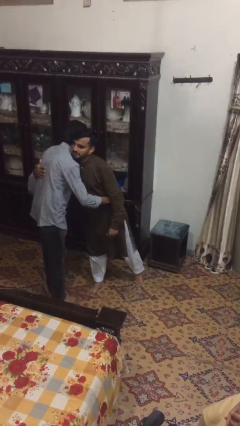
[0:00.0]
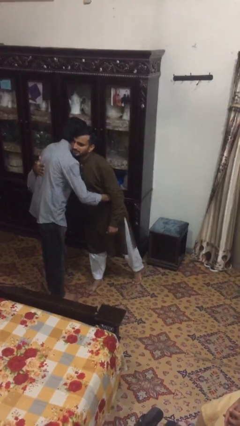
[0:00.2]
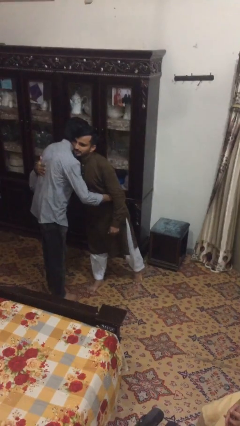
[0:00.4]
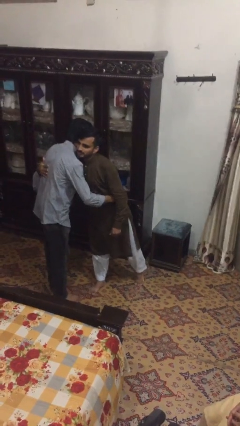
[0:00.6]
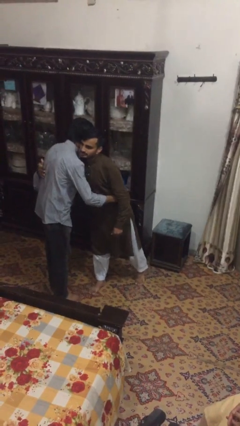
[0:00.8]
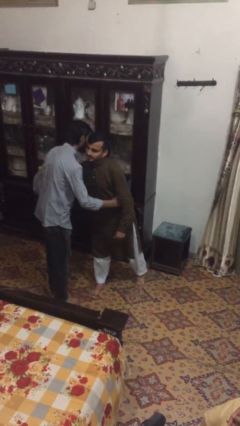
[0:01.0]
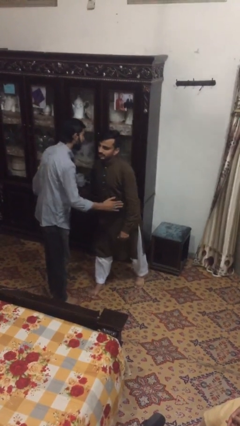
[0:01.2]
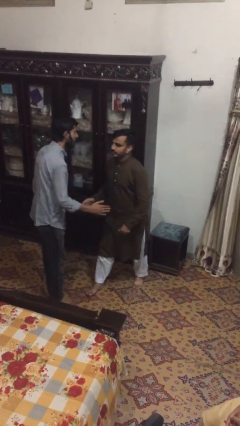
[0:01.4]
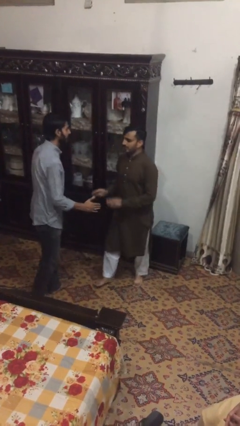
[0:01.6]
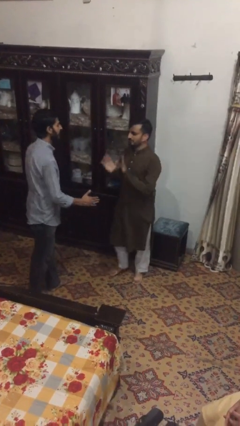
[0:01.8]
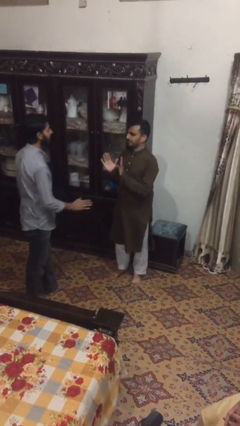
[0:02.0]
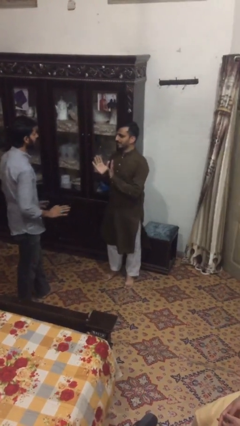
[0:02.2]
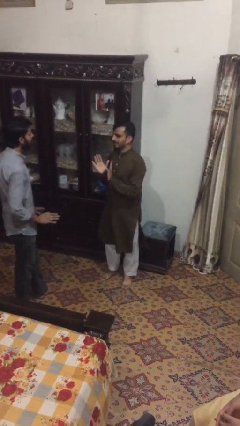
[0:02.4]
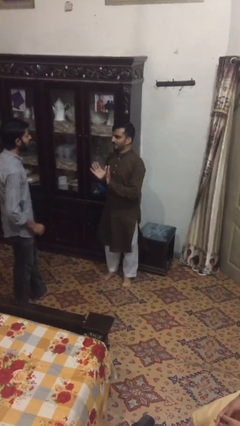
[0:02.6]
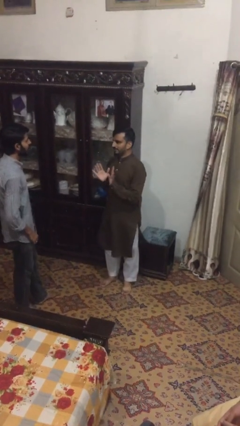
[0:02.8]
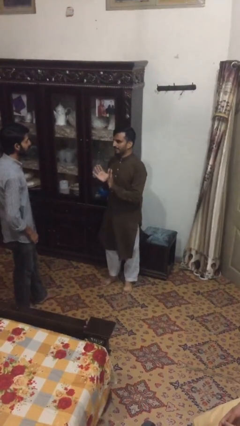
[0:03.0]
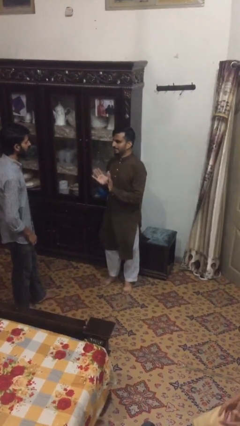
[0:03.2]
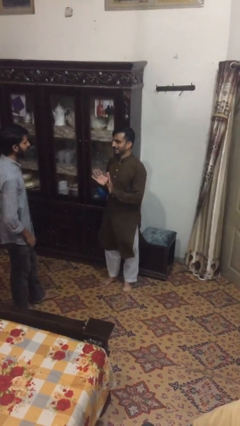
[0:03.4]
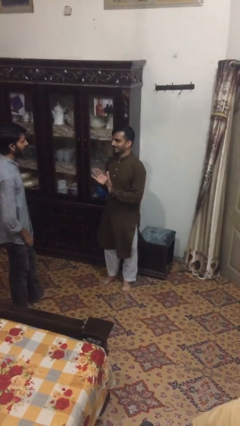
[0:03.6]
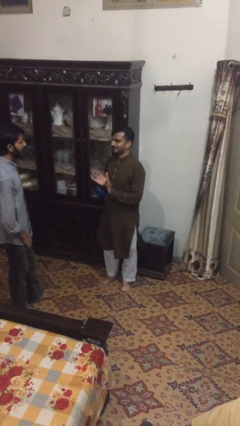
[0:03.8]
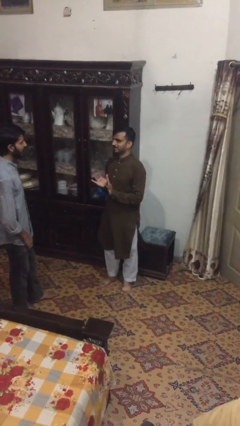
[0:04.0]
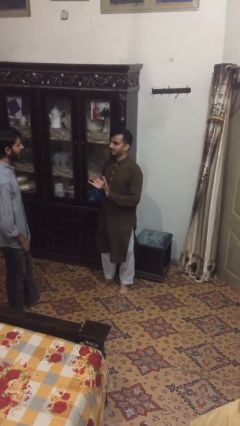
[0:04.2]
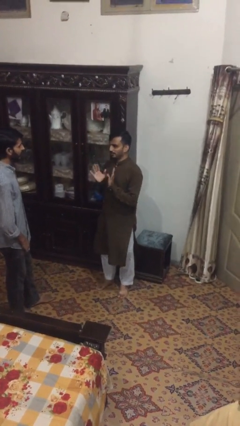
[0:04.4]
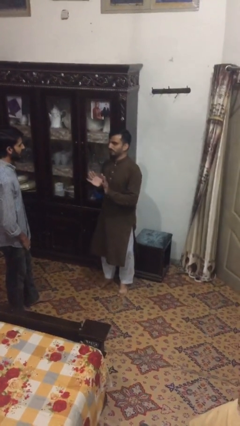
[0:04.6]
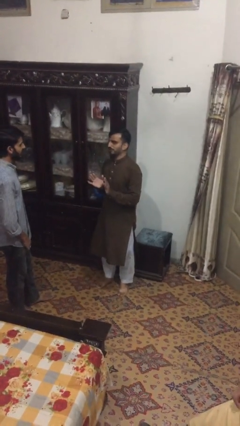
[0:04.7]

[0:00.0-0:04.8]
person talks to person

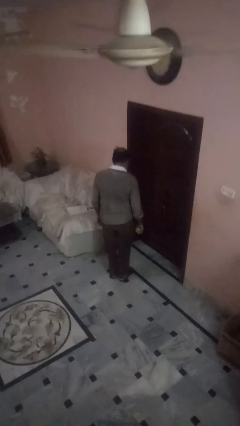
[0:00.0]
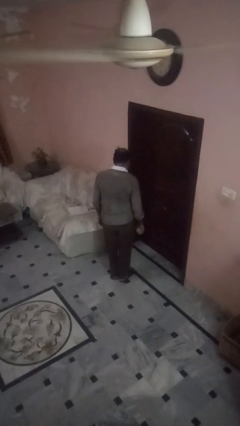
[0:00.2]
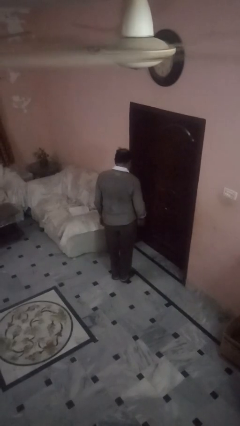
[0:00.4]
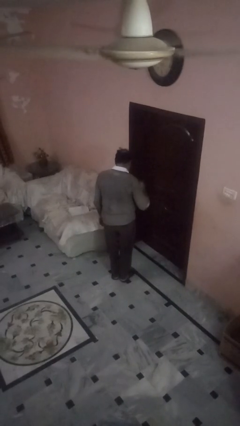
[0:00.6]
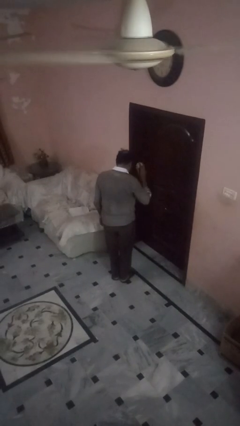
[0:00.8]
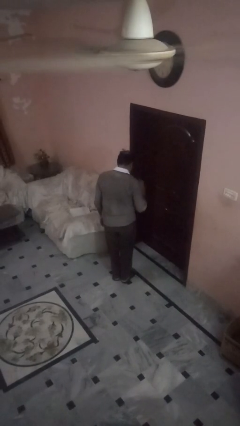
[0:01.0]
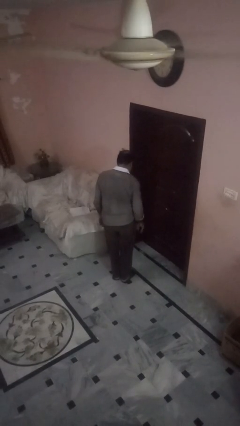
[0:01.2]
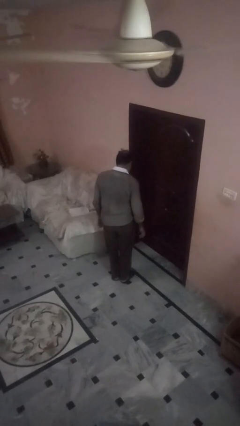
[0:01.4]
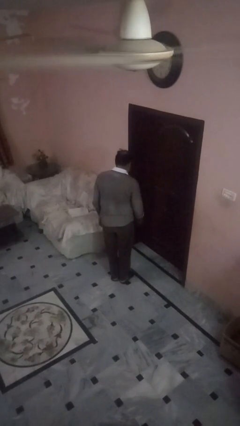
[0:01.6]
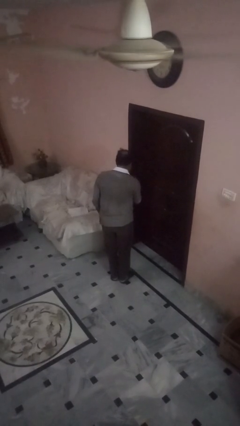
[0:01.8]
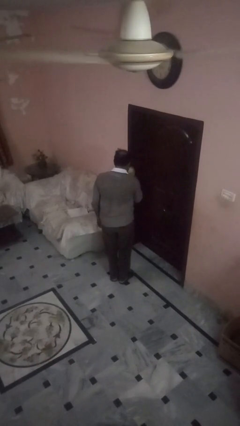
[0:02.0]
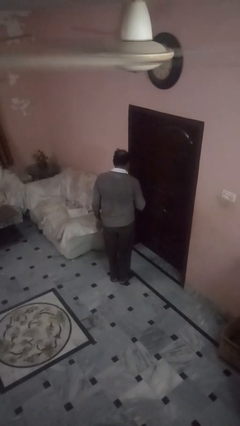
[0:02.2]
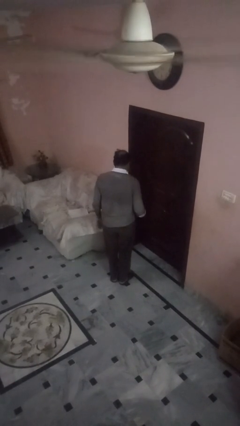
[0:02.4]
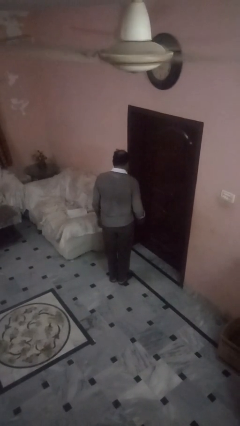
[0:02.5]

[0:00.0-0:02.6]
person bounces ball on floor

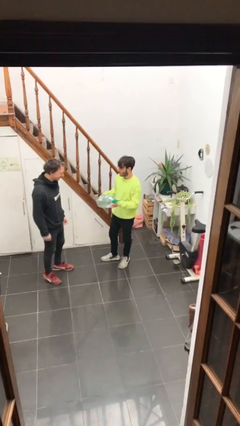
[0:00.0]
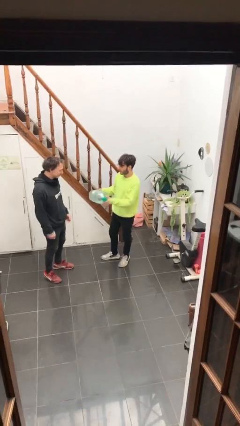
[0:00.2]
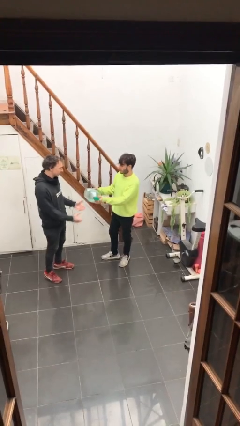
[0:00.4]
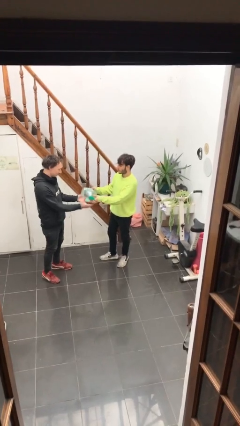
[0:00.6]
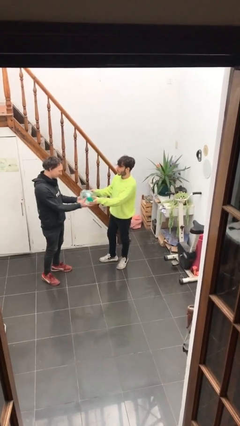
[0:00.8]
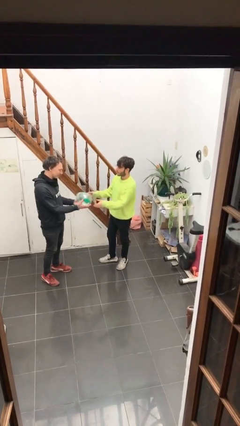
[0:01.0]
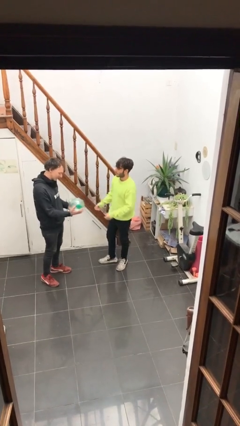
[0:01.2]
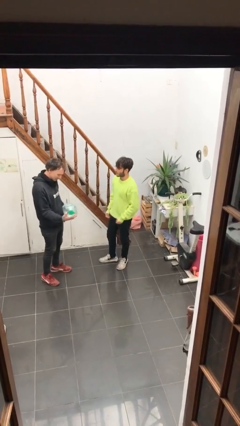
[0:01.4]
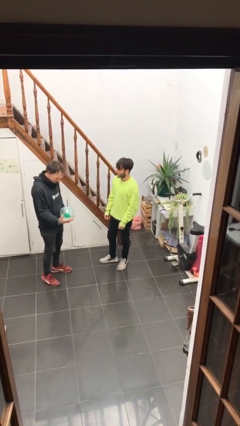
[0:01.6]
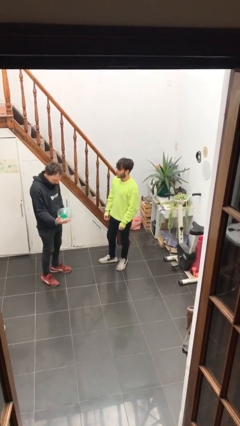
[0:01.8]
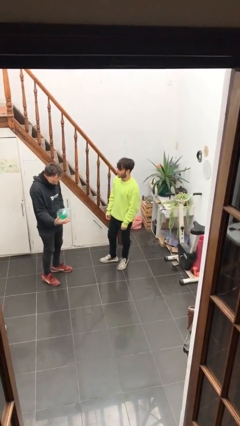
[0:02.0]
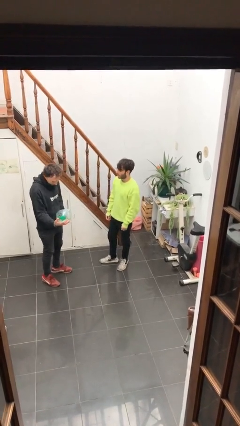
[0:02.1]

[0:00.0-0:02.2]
person transfers object to person

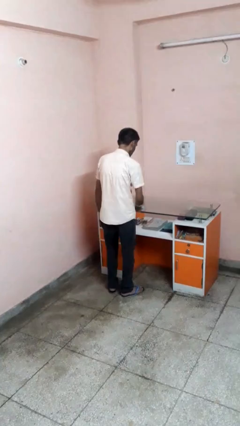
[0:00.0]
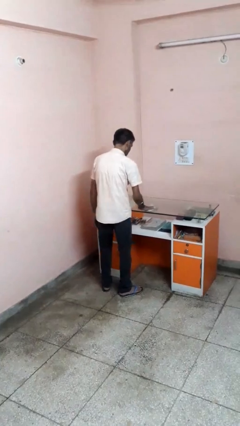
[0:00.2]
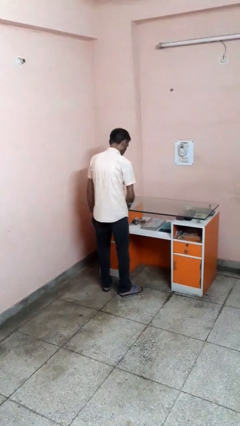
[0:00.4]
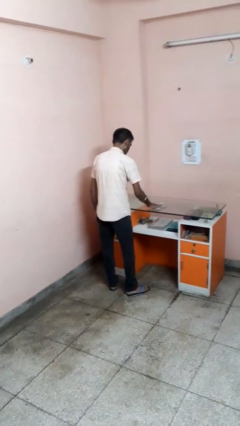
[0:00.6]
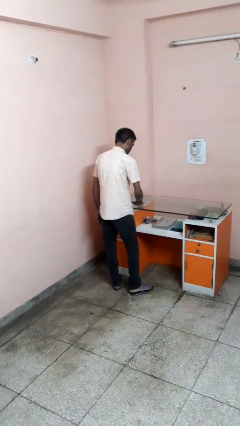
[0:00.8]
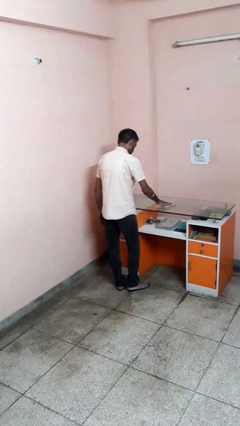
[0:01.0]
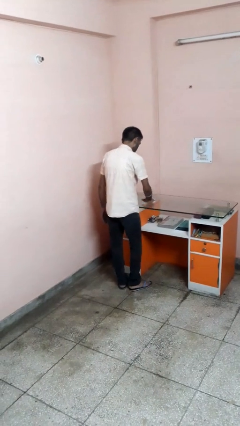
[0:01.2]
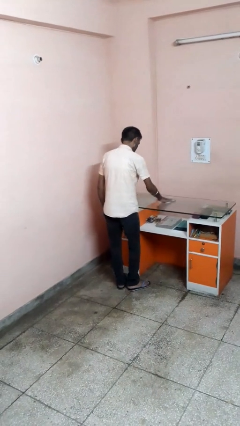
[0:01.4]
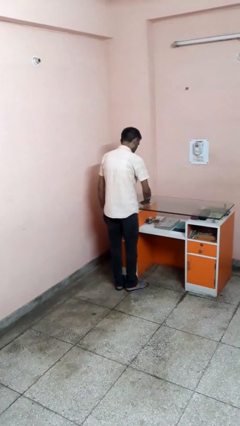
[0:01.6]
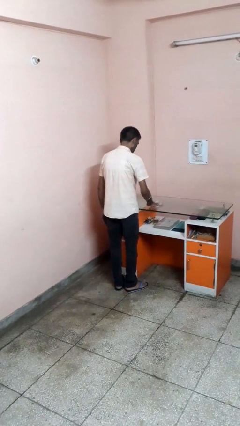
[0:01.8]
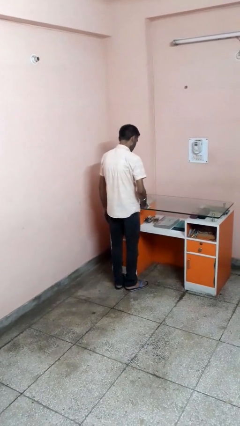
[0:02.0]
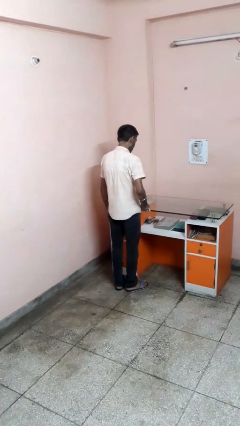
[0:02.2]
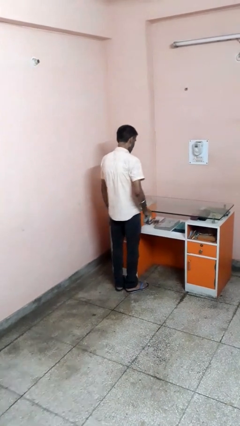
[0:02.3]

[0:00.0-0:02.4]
person cleans table with rag

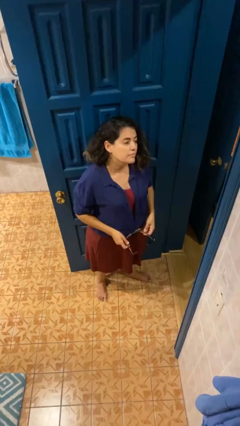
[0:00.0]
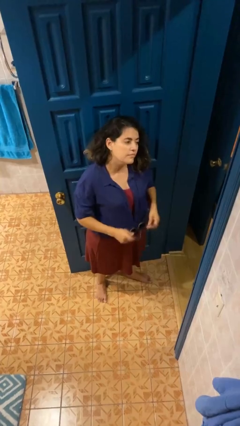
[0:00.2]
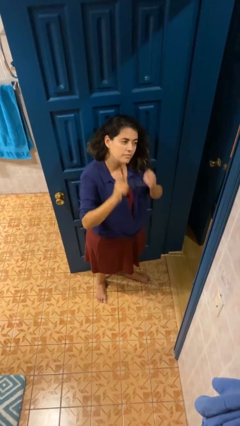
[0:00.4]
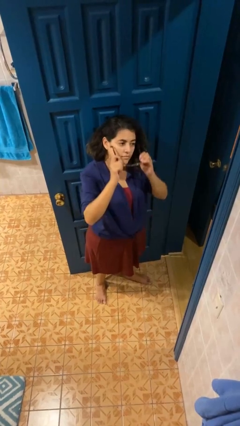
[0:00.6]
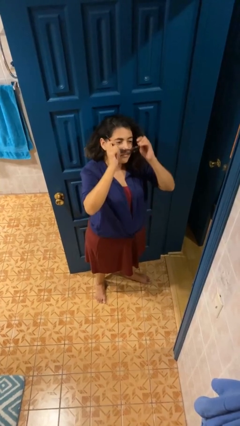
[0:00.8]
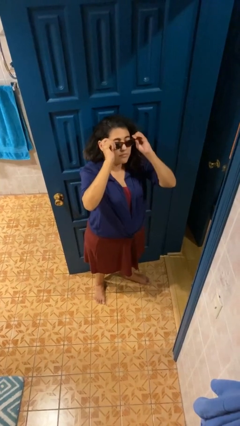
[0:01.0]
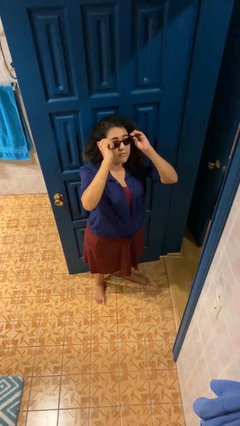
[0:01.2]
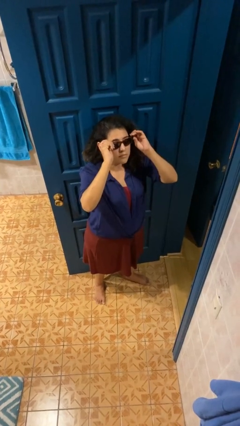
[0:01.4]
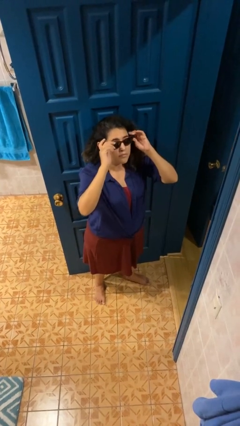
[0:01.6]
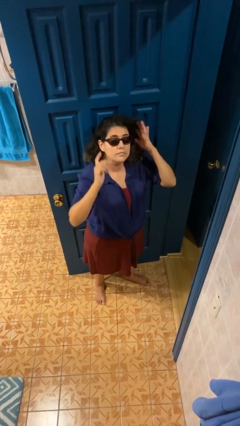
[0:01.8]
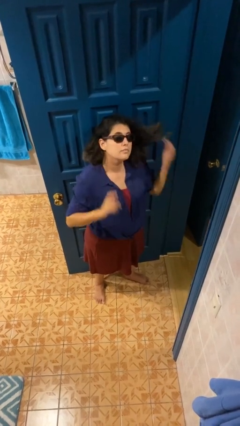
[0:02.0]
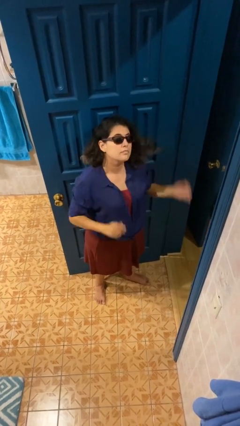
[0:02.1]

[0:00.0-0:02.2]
person puts on sunglasses

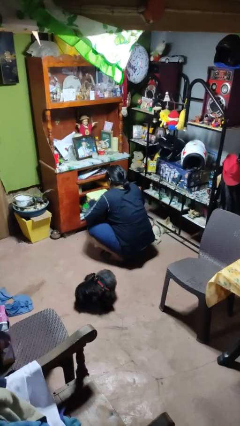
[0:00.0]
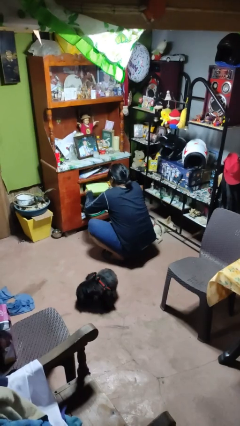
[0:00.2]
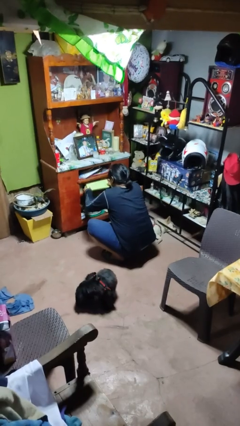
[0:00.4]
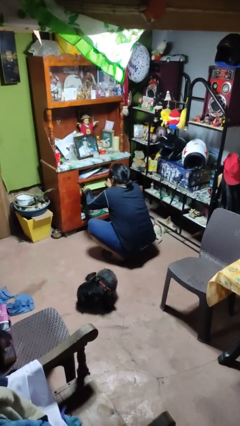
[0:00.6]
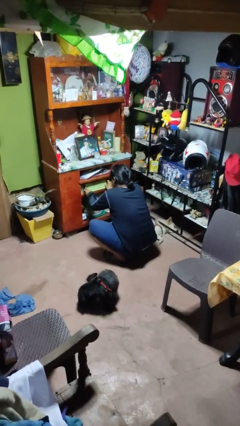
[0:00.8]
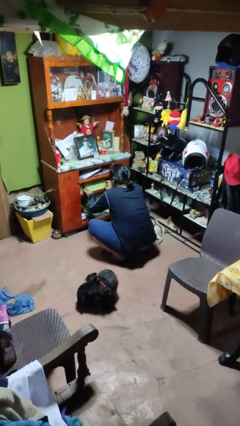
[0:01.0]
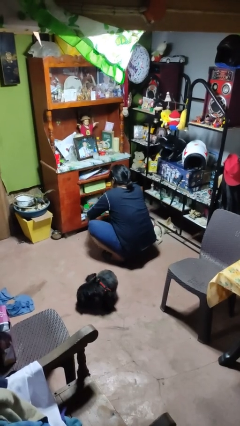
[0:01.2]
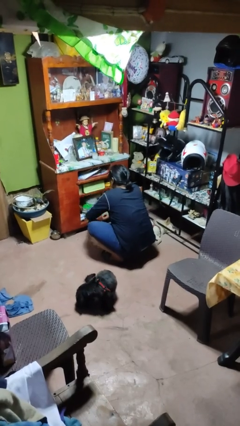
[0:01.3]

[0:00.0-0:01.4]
person puts down object into cabinet

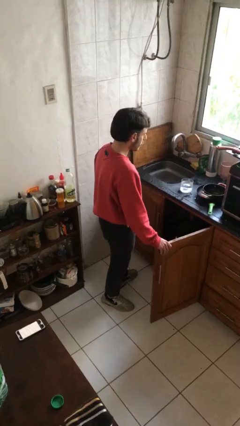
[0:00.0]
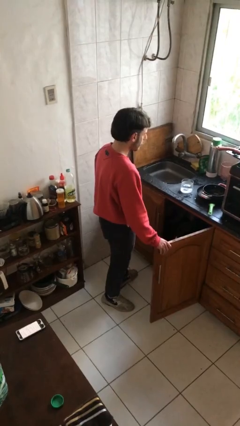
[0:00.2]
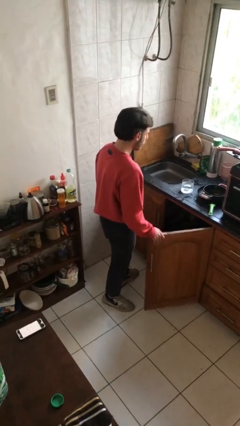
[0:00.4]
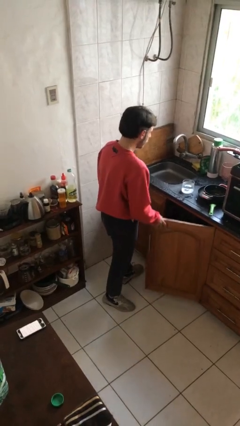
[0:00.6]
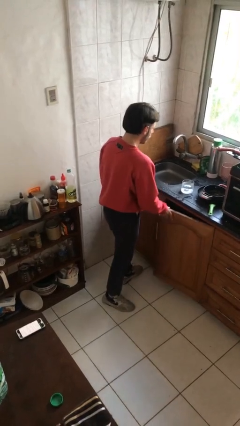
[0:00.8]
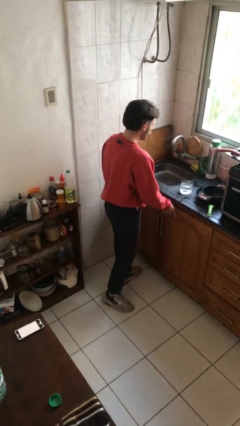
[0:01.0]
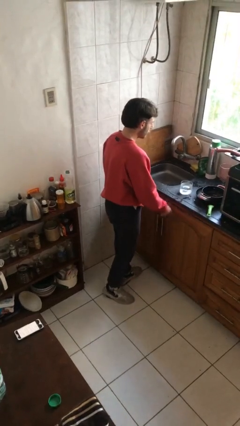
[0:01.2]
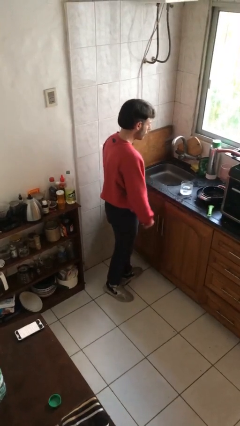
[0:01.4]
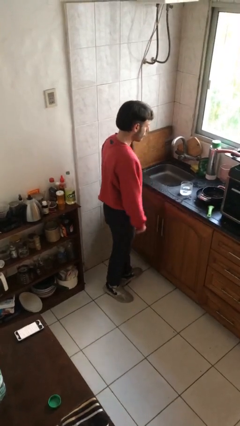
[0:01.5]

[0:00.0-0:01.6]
person closes cabinet
